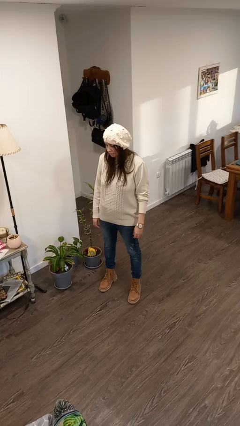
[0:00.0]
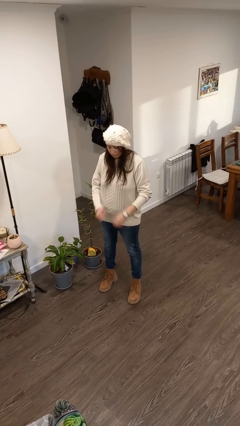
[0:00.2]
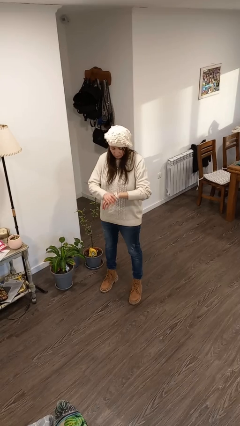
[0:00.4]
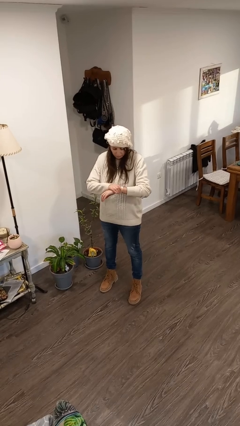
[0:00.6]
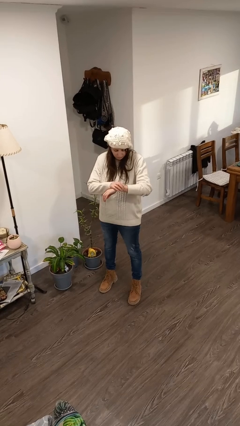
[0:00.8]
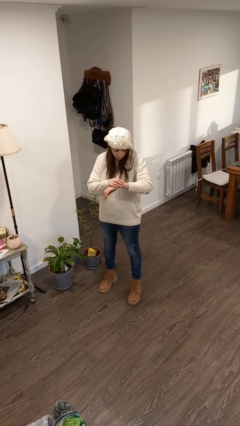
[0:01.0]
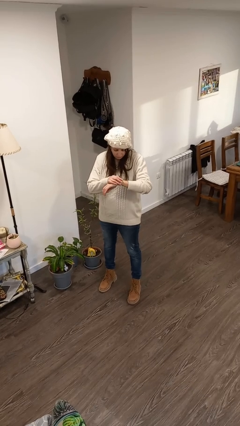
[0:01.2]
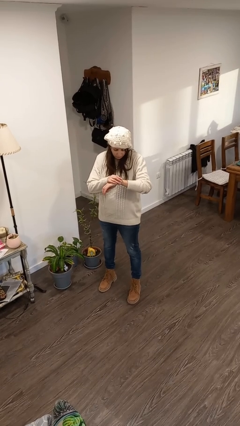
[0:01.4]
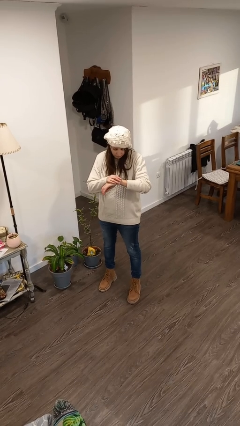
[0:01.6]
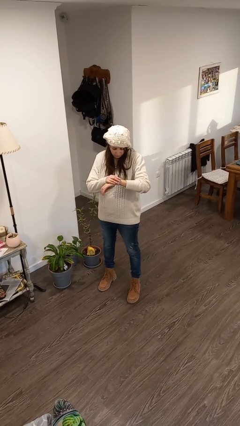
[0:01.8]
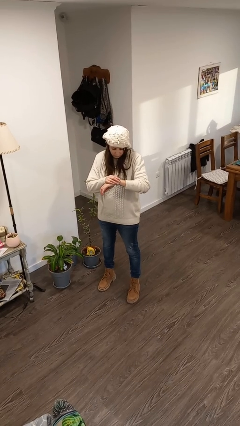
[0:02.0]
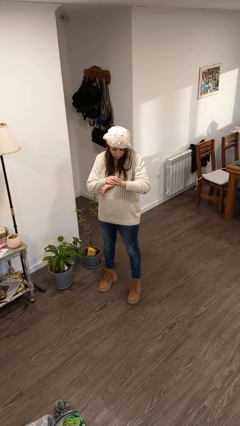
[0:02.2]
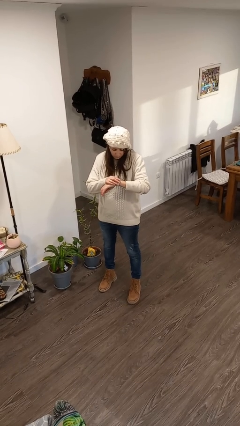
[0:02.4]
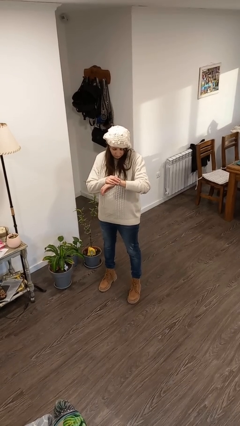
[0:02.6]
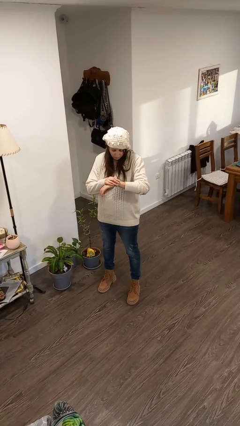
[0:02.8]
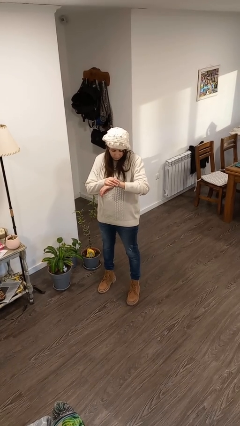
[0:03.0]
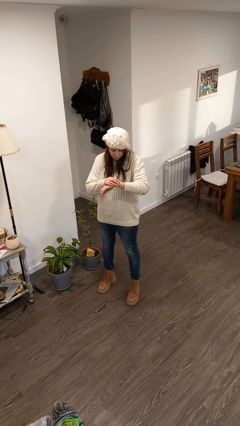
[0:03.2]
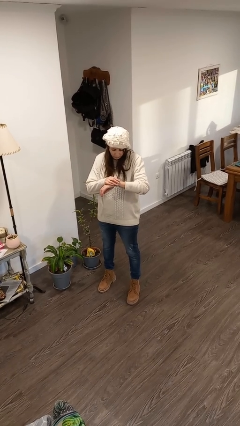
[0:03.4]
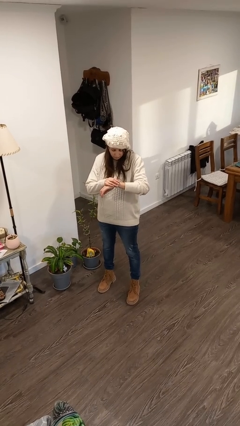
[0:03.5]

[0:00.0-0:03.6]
person looks at wristwatch

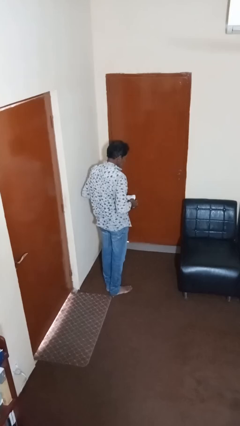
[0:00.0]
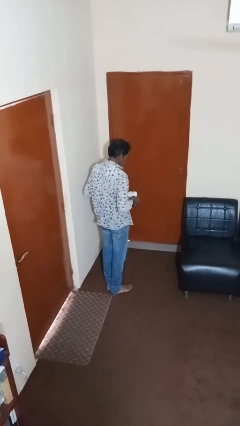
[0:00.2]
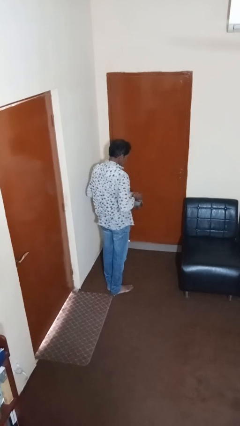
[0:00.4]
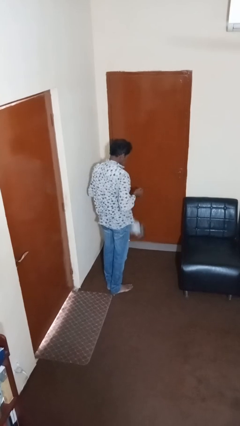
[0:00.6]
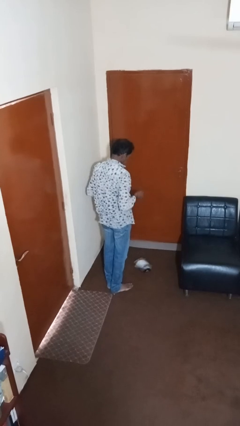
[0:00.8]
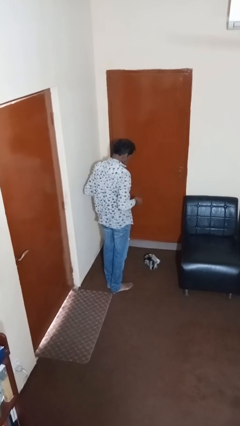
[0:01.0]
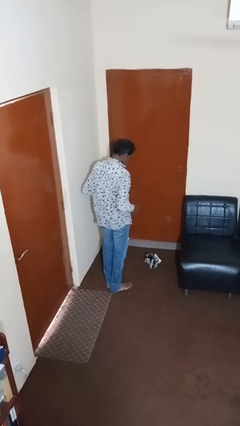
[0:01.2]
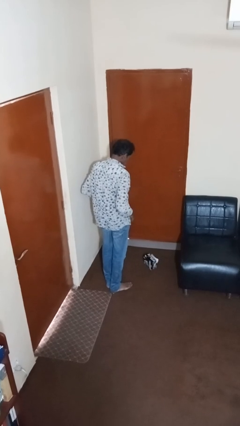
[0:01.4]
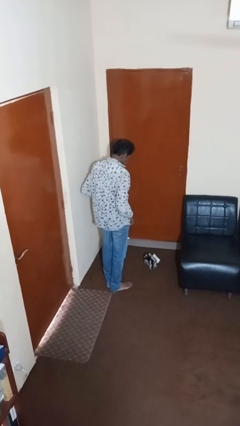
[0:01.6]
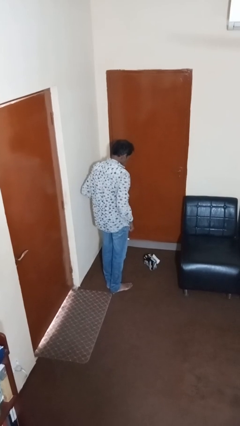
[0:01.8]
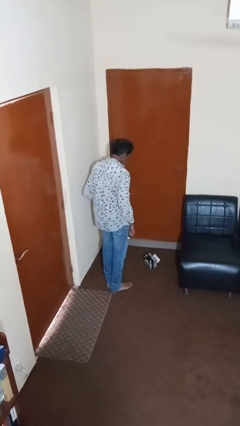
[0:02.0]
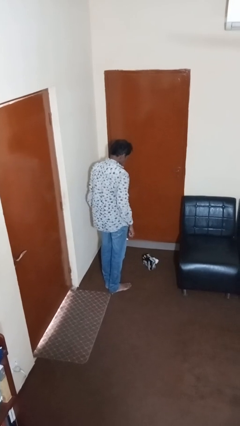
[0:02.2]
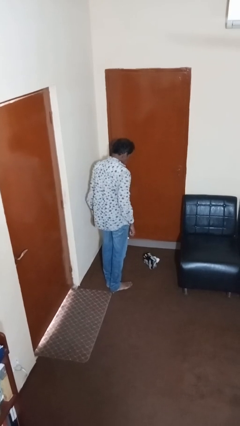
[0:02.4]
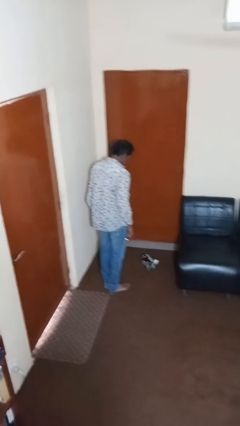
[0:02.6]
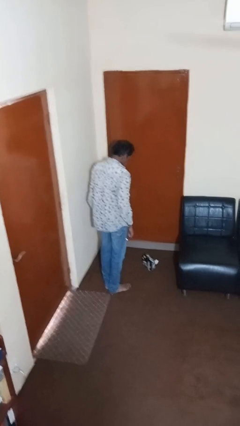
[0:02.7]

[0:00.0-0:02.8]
person drops object

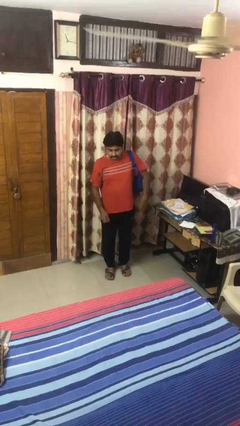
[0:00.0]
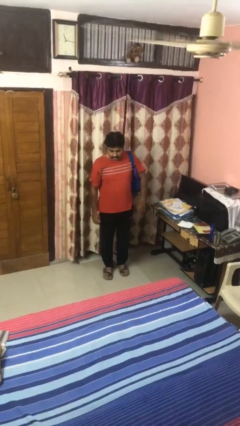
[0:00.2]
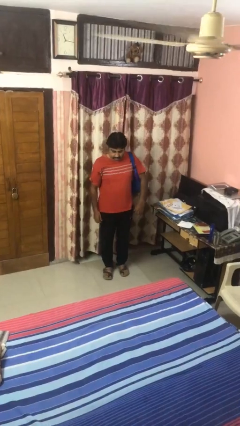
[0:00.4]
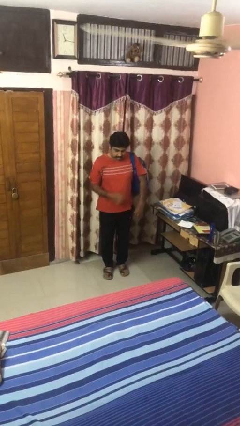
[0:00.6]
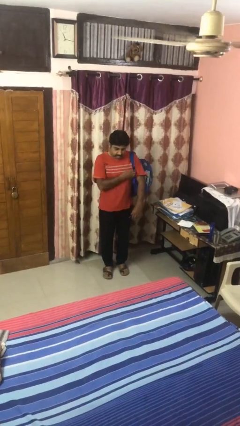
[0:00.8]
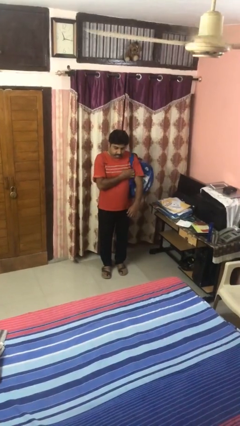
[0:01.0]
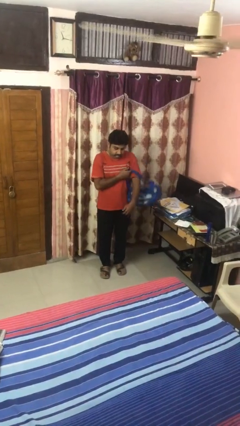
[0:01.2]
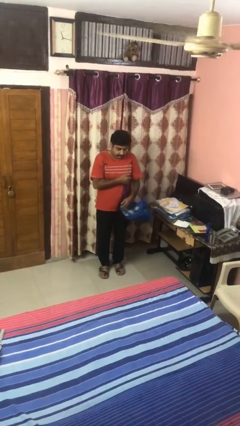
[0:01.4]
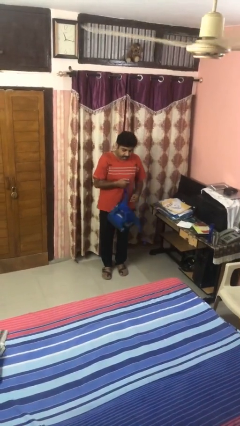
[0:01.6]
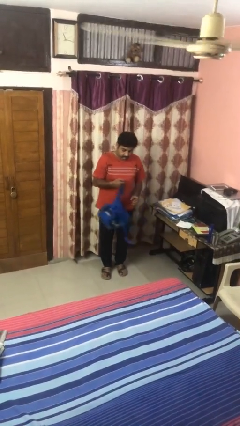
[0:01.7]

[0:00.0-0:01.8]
person takes off backpack

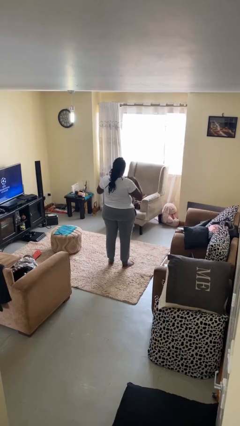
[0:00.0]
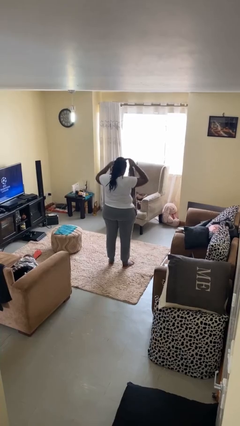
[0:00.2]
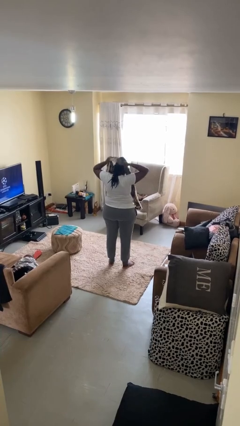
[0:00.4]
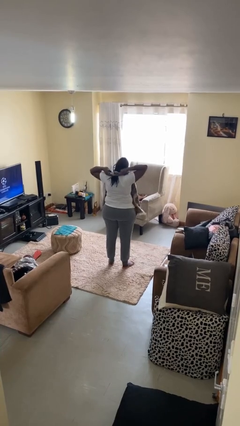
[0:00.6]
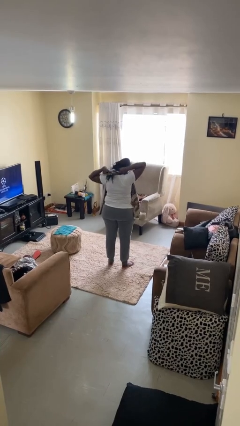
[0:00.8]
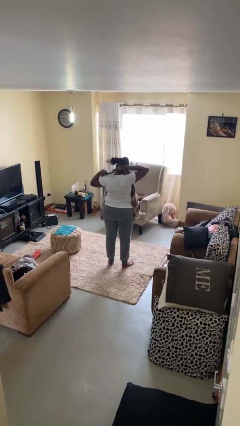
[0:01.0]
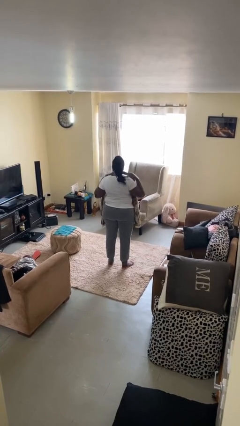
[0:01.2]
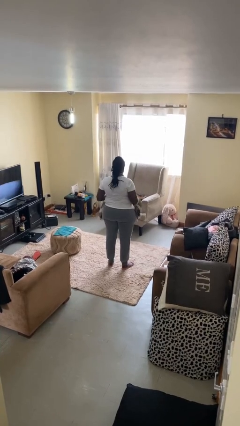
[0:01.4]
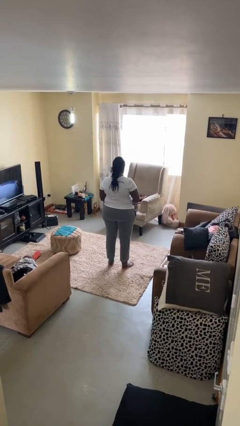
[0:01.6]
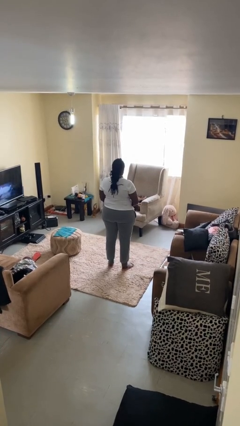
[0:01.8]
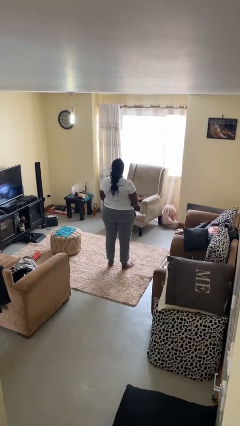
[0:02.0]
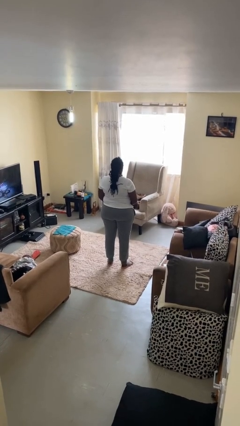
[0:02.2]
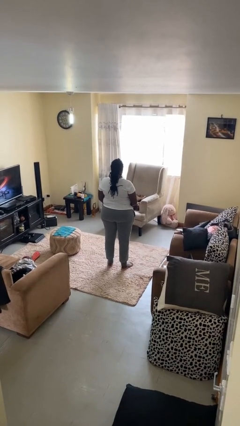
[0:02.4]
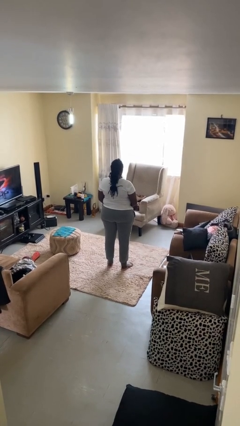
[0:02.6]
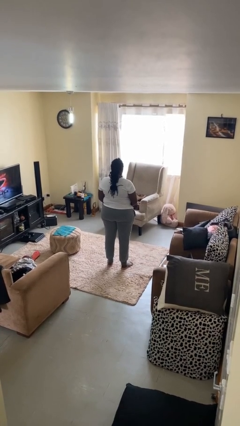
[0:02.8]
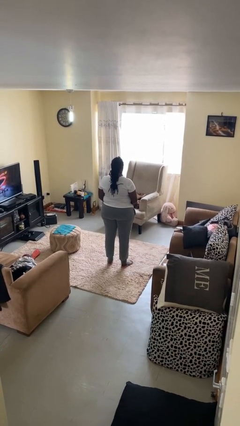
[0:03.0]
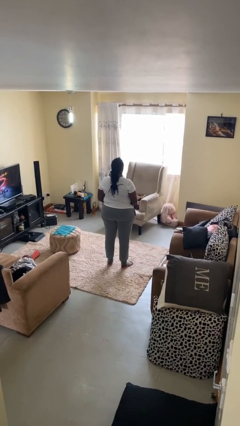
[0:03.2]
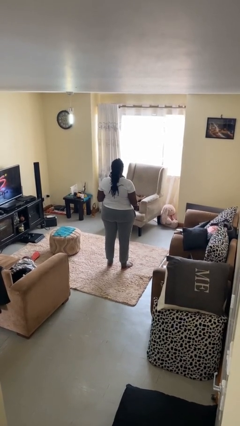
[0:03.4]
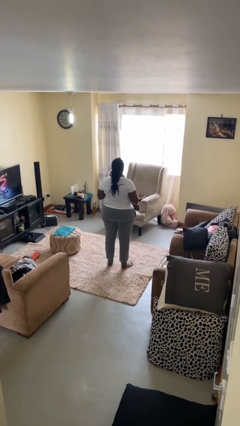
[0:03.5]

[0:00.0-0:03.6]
person puts on scarf

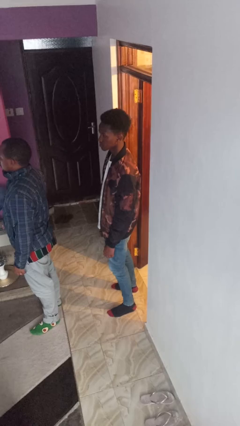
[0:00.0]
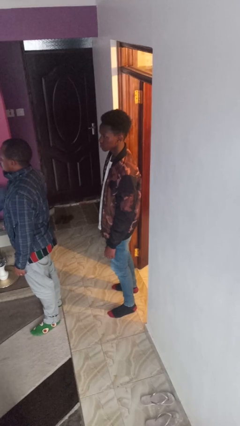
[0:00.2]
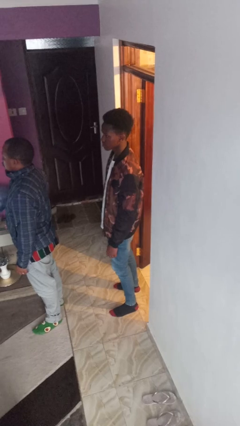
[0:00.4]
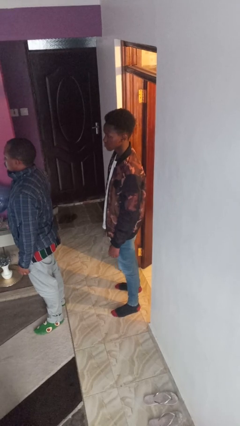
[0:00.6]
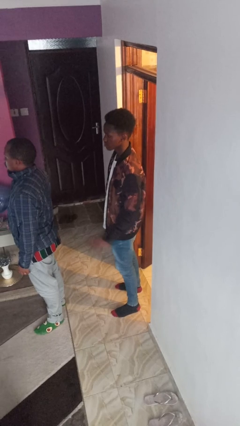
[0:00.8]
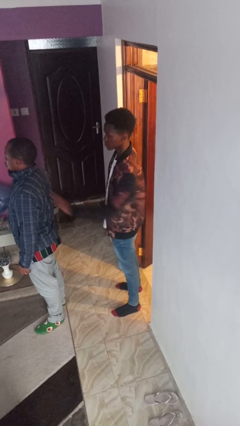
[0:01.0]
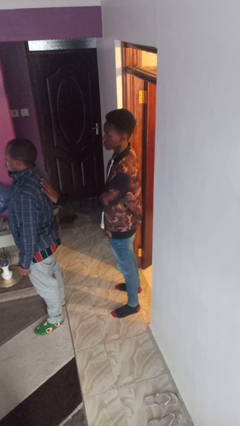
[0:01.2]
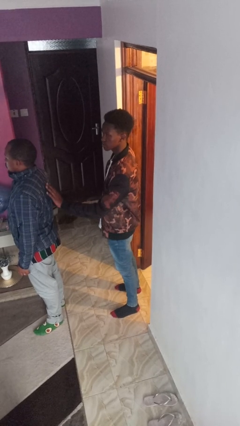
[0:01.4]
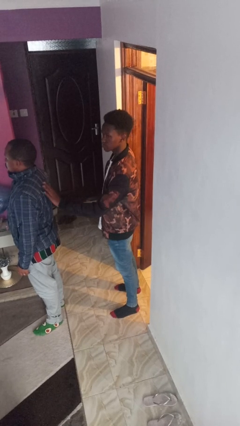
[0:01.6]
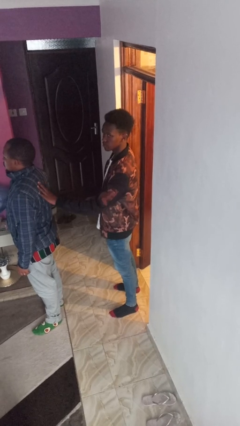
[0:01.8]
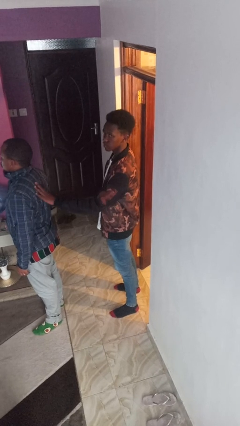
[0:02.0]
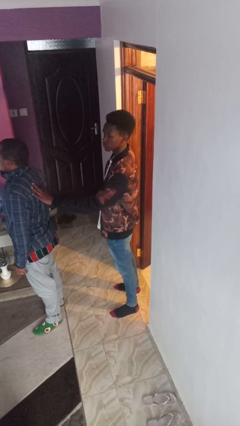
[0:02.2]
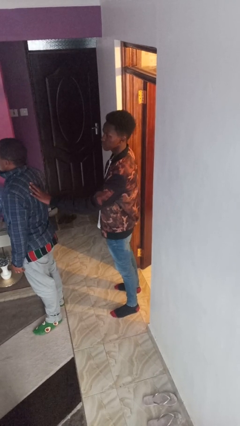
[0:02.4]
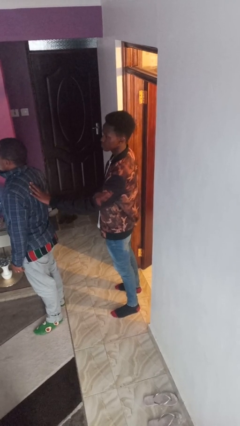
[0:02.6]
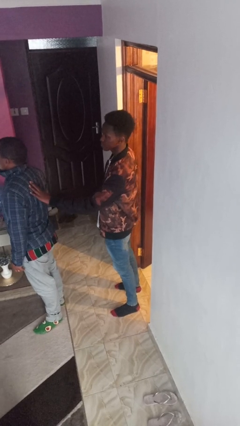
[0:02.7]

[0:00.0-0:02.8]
person touches back of person

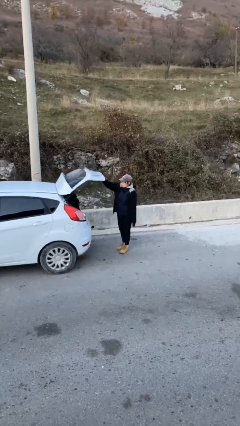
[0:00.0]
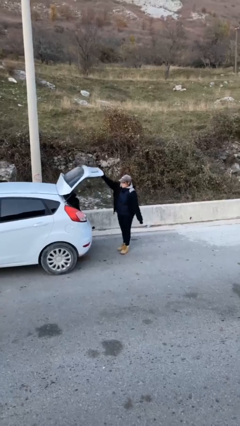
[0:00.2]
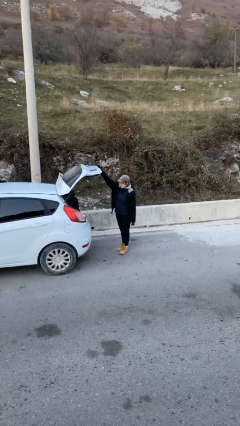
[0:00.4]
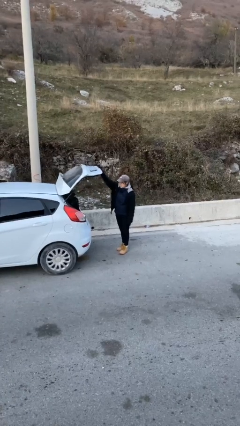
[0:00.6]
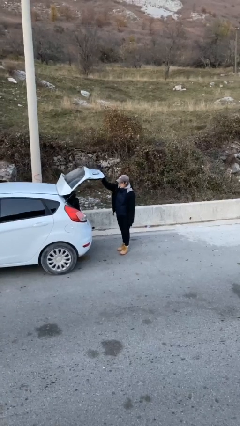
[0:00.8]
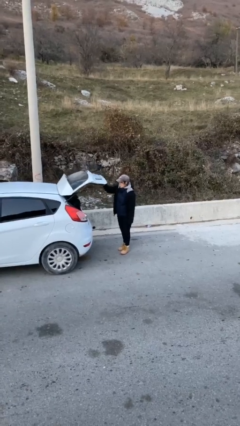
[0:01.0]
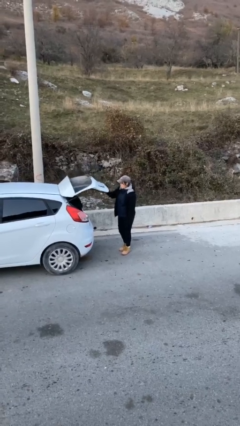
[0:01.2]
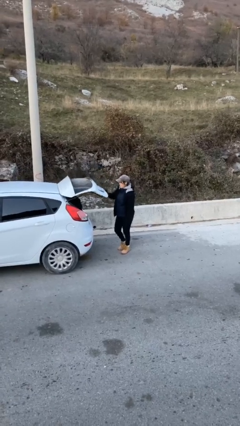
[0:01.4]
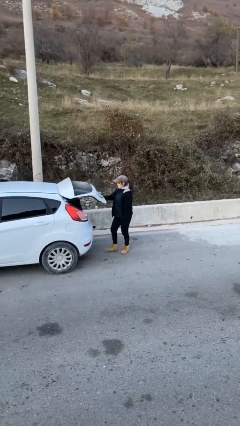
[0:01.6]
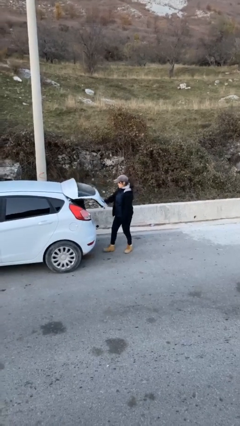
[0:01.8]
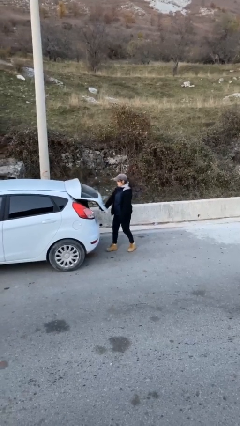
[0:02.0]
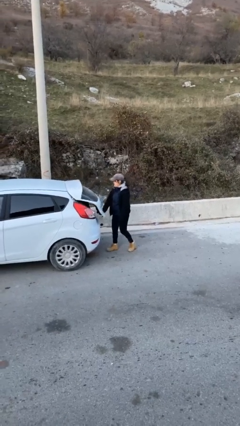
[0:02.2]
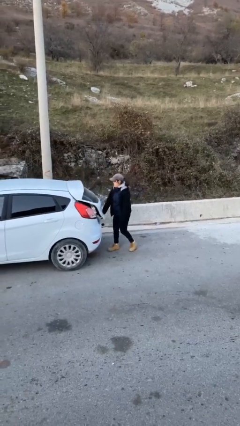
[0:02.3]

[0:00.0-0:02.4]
person closes car trunk
